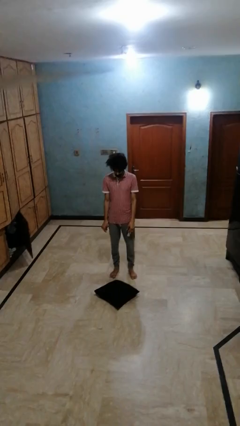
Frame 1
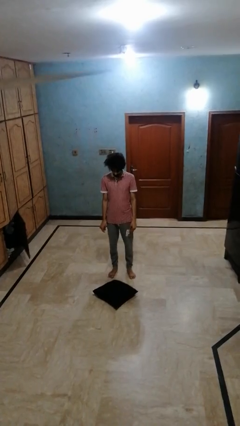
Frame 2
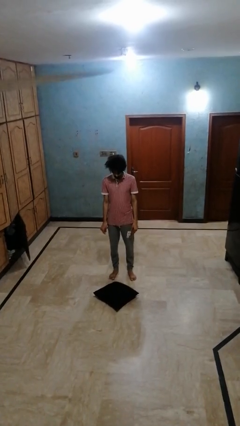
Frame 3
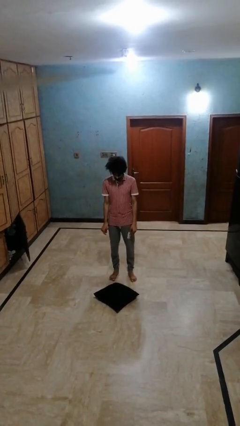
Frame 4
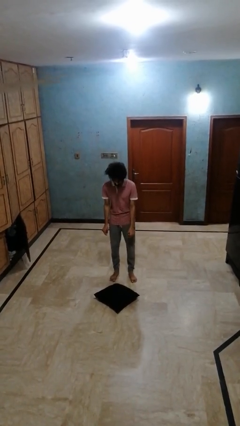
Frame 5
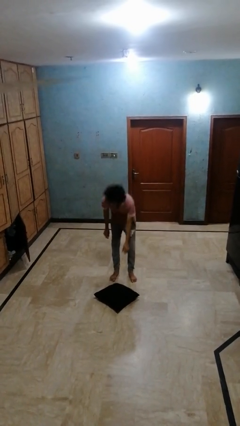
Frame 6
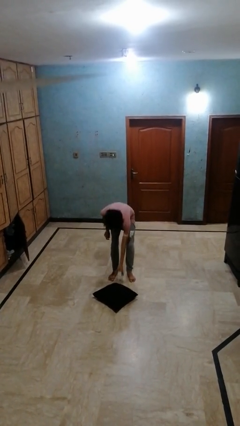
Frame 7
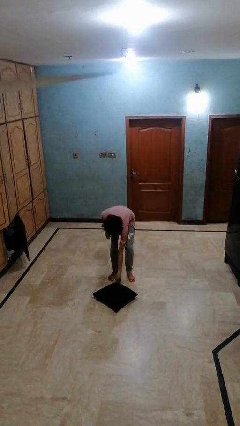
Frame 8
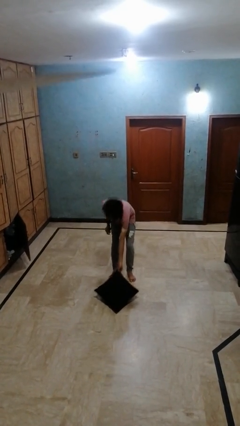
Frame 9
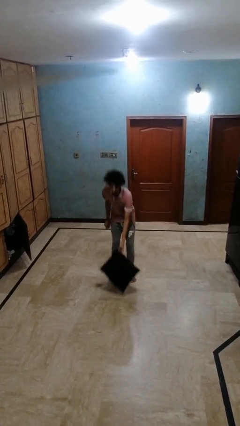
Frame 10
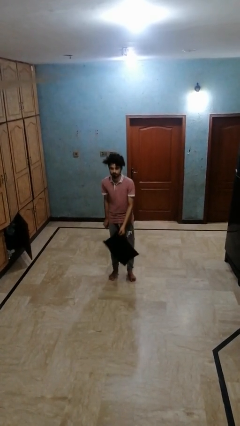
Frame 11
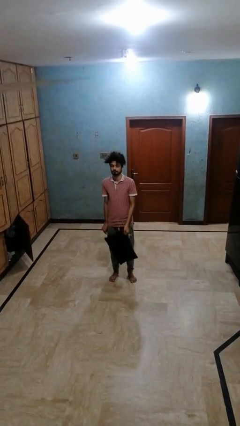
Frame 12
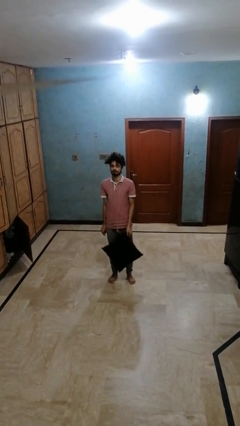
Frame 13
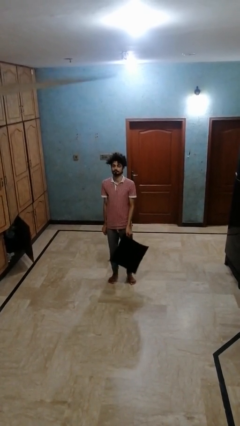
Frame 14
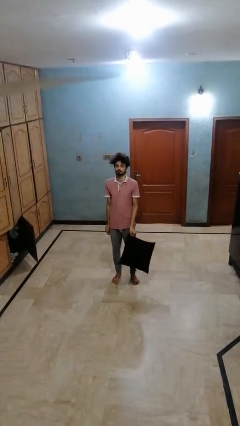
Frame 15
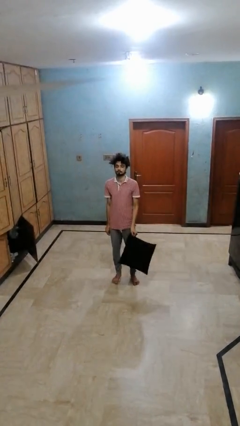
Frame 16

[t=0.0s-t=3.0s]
person picks up object from floor

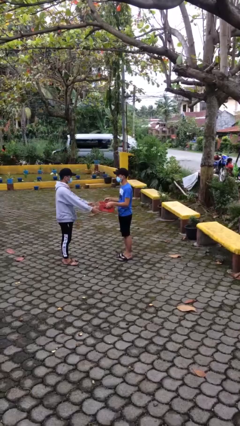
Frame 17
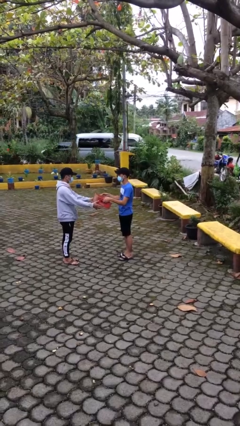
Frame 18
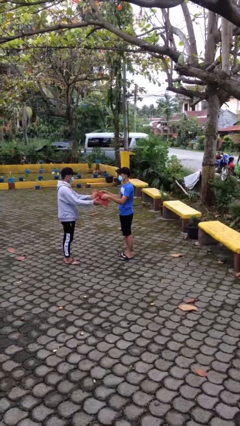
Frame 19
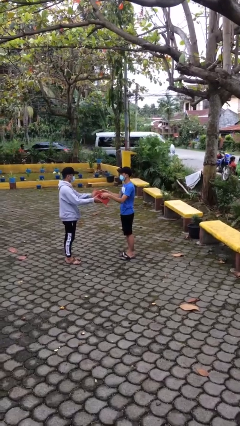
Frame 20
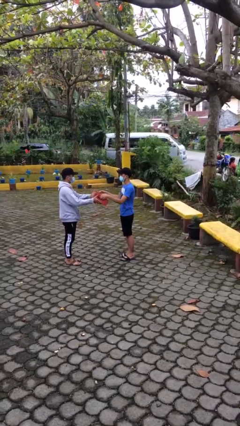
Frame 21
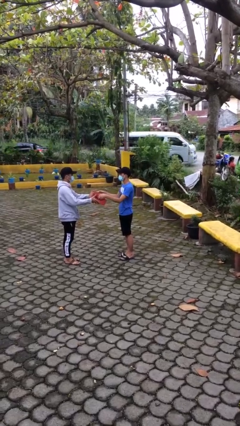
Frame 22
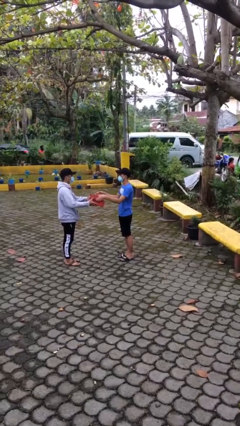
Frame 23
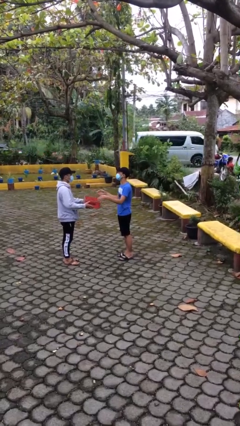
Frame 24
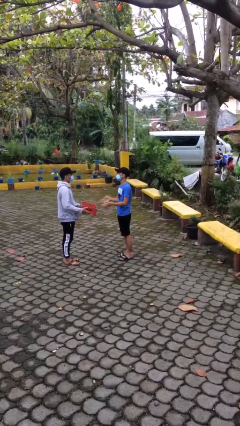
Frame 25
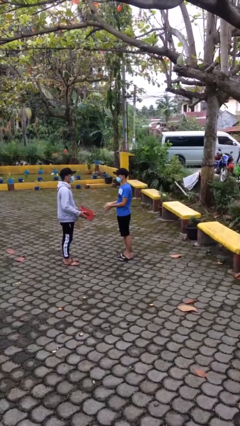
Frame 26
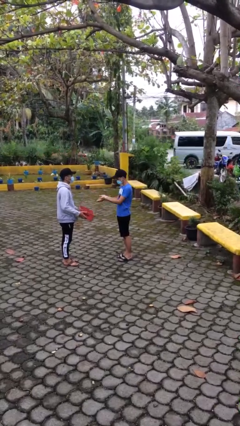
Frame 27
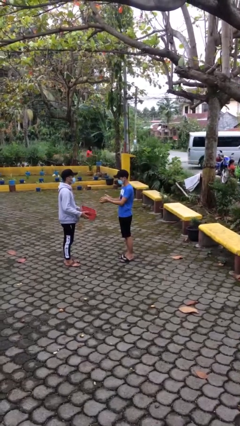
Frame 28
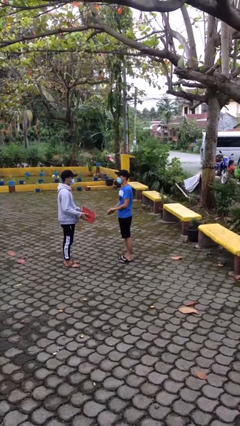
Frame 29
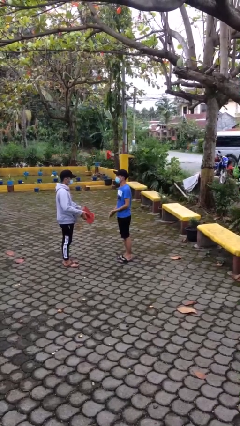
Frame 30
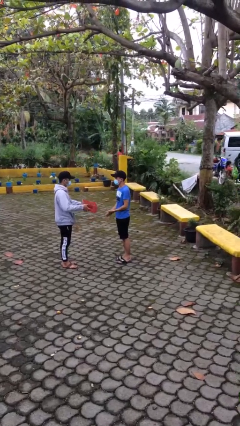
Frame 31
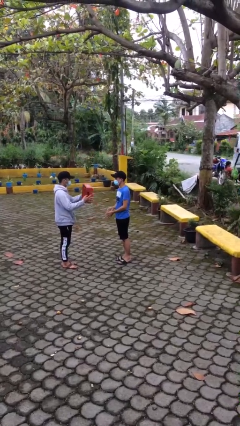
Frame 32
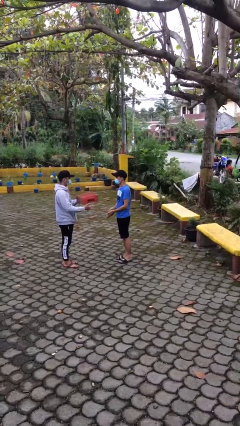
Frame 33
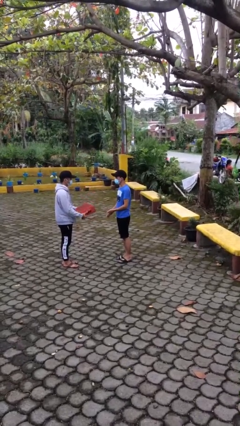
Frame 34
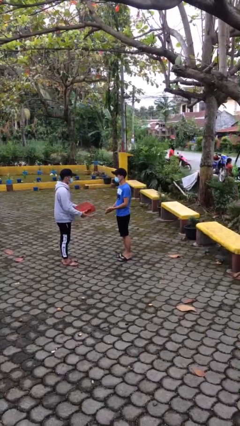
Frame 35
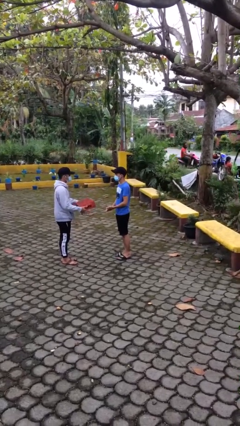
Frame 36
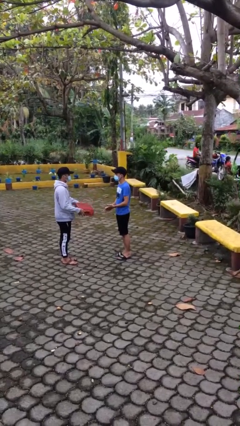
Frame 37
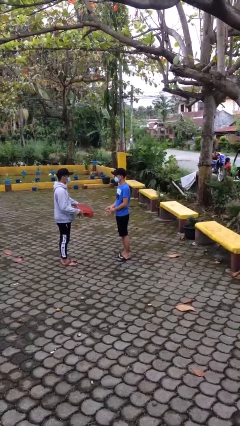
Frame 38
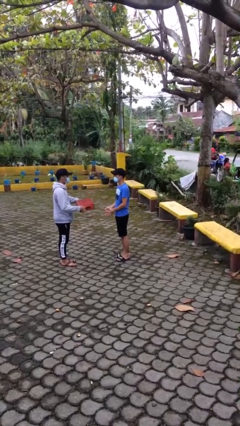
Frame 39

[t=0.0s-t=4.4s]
person transfers object to person

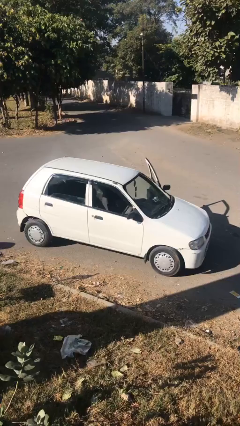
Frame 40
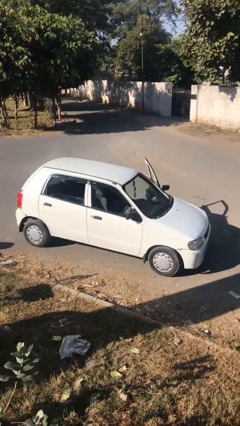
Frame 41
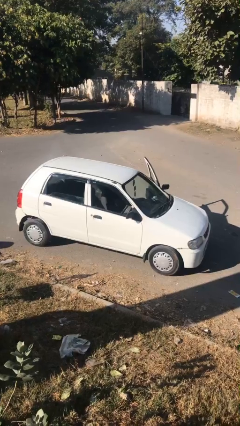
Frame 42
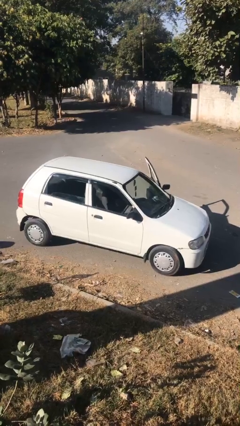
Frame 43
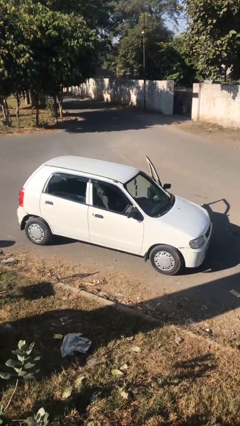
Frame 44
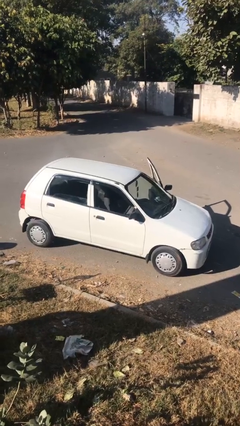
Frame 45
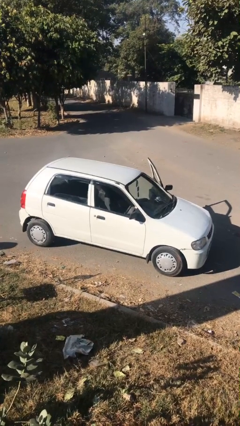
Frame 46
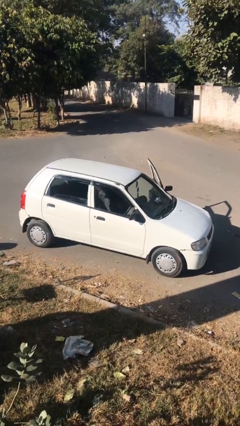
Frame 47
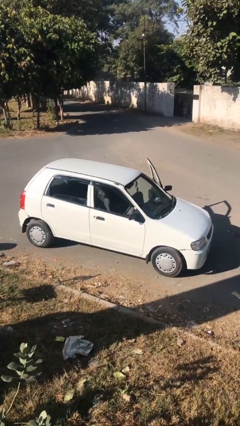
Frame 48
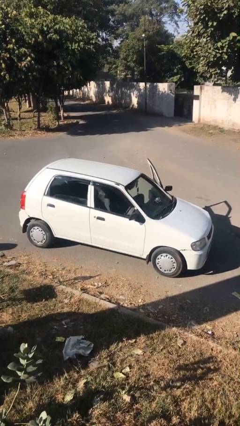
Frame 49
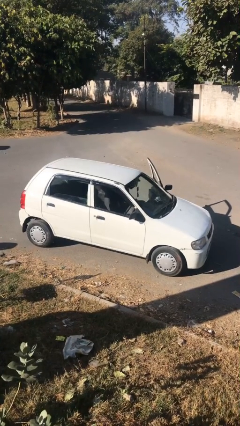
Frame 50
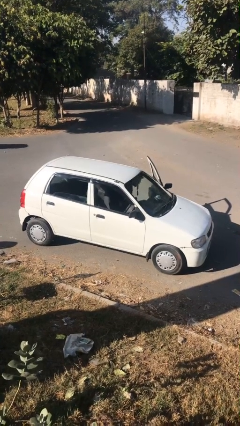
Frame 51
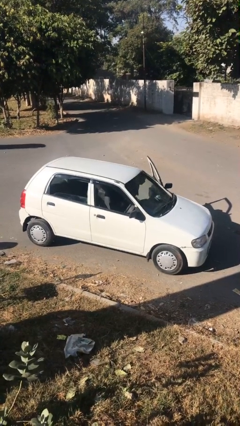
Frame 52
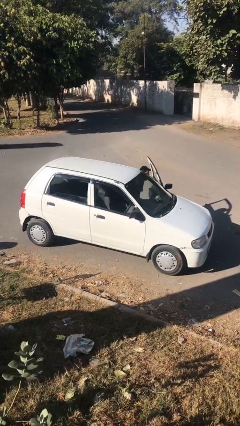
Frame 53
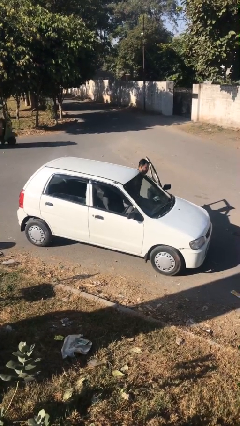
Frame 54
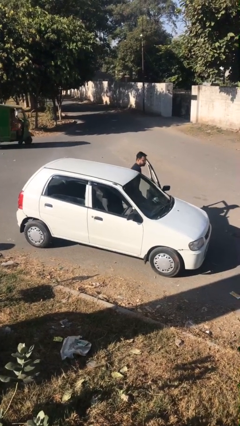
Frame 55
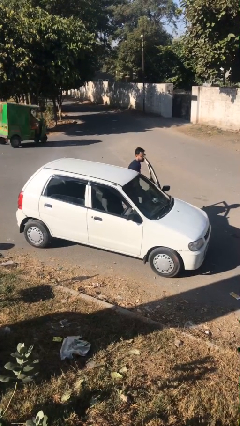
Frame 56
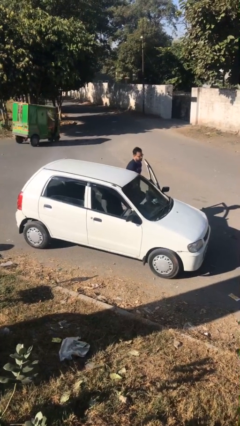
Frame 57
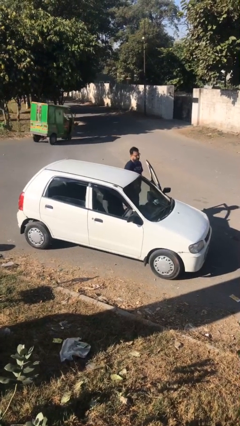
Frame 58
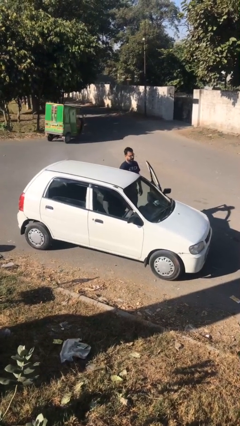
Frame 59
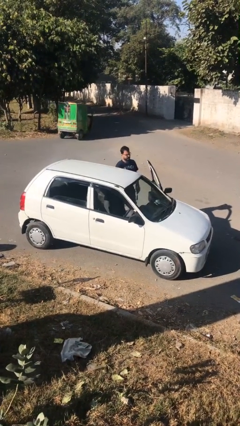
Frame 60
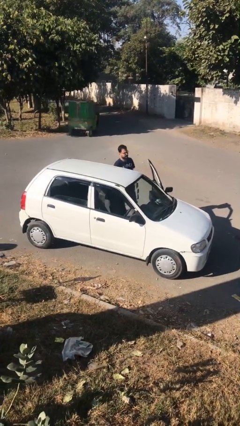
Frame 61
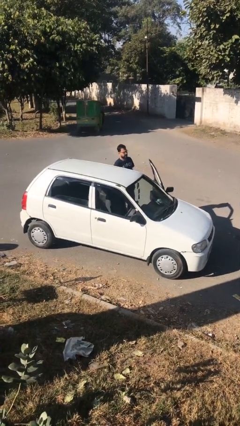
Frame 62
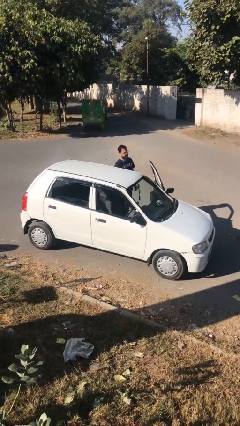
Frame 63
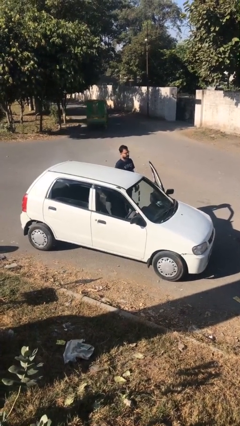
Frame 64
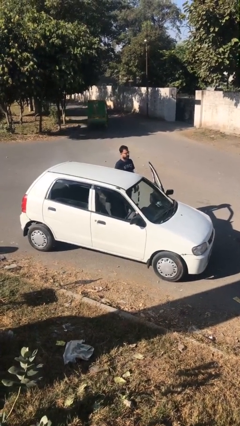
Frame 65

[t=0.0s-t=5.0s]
car drops off person

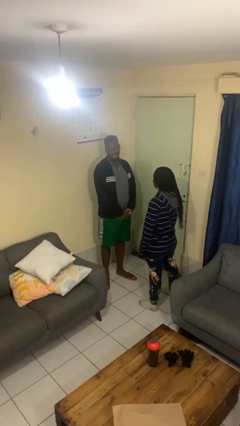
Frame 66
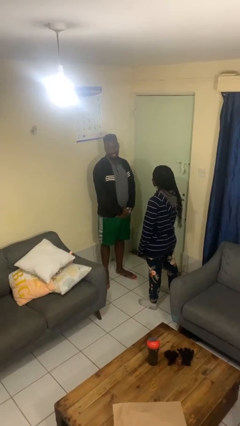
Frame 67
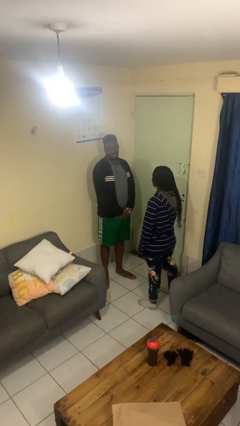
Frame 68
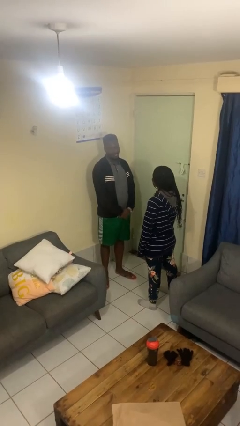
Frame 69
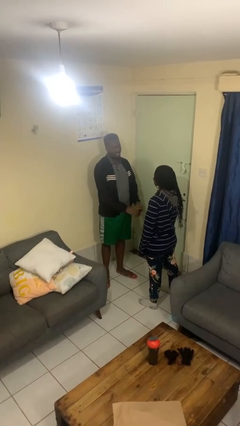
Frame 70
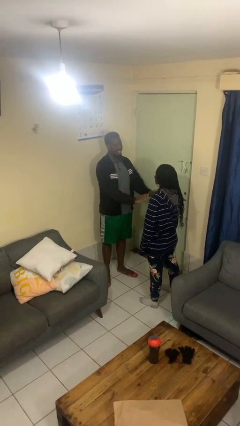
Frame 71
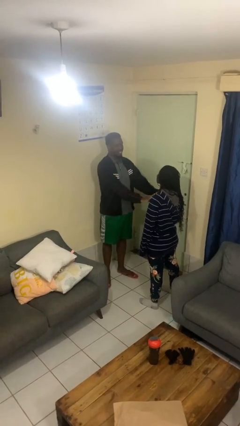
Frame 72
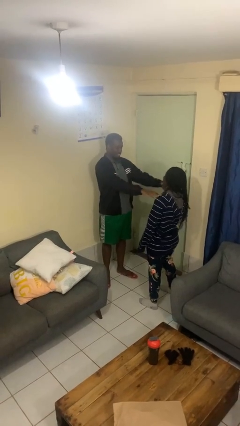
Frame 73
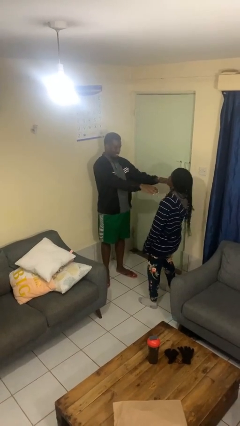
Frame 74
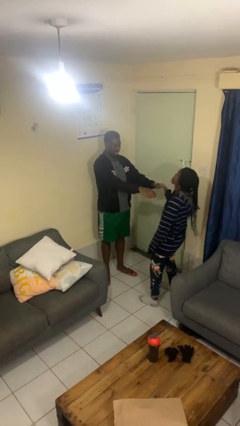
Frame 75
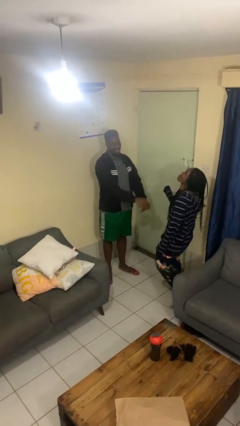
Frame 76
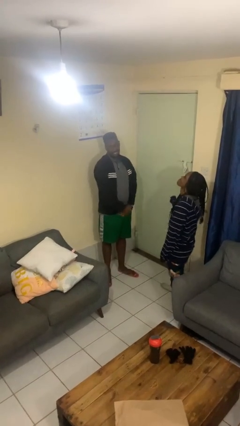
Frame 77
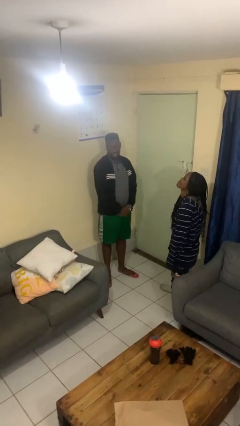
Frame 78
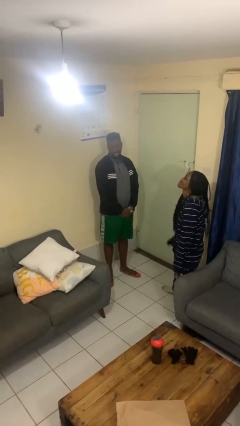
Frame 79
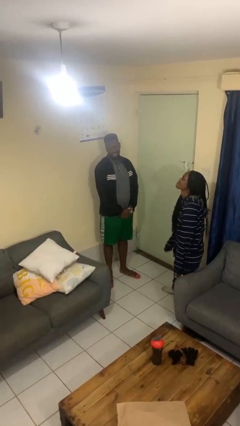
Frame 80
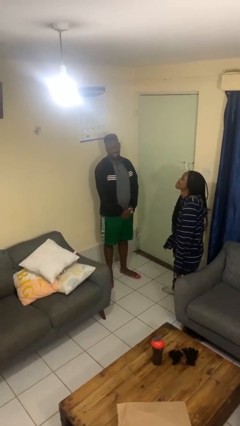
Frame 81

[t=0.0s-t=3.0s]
person shoves person

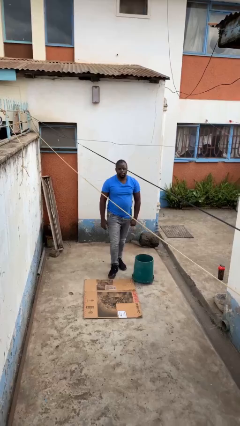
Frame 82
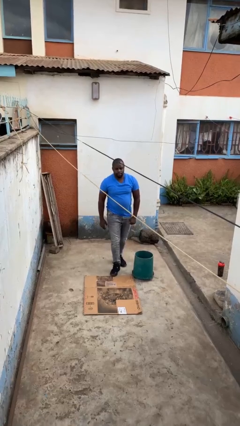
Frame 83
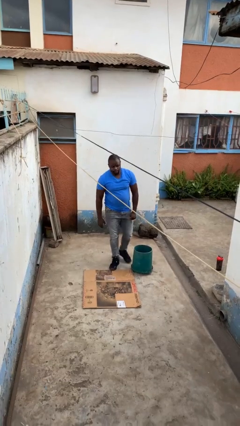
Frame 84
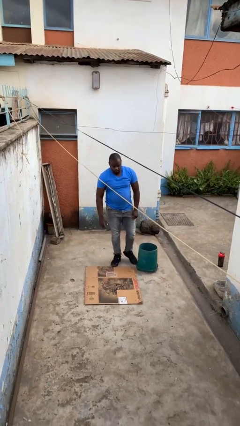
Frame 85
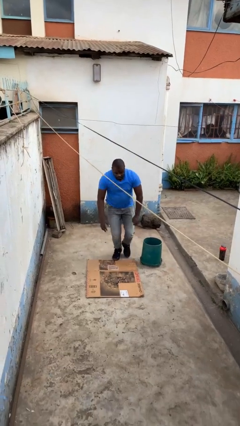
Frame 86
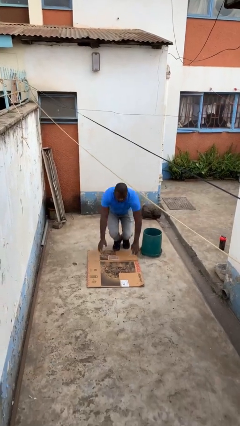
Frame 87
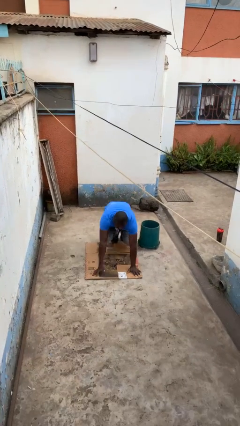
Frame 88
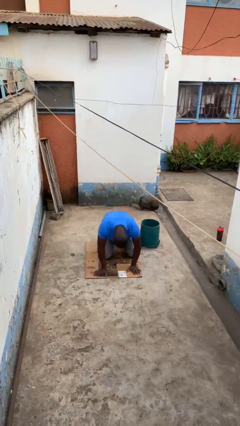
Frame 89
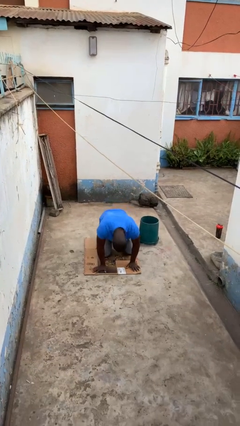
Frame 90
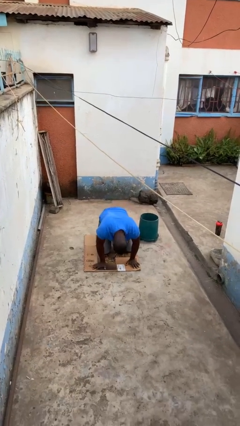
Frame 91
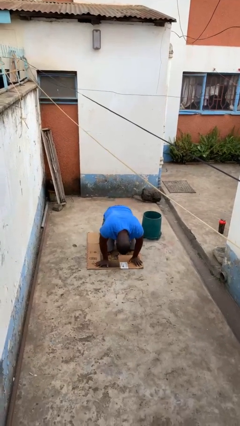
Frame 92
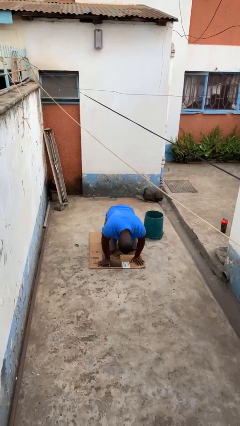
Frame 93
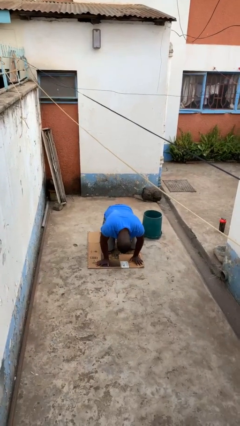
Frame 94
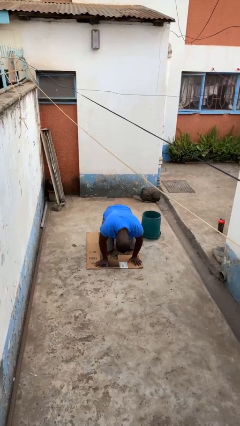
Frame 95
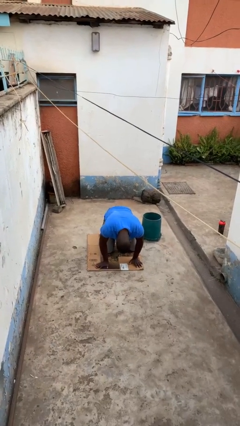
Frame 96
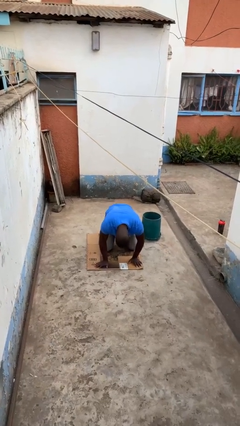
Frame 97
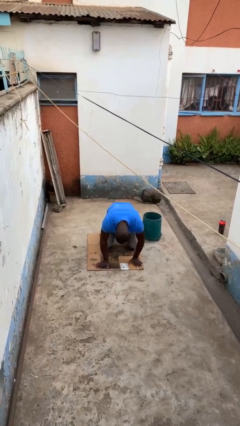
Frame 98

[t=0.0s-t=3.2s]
person trips on object on floor
